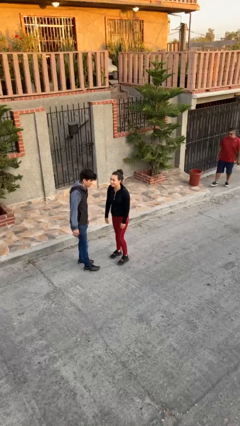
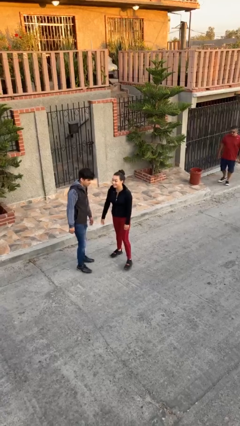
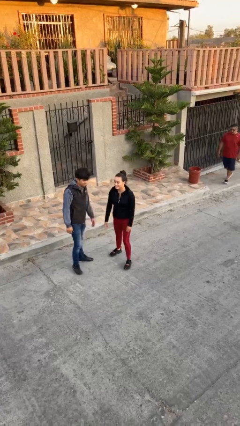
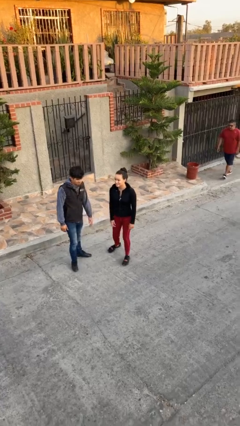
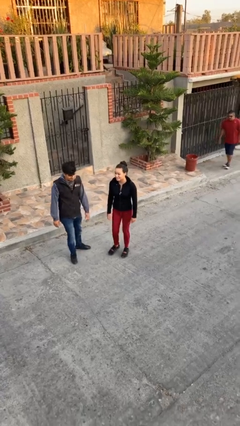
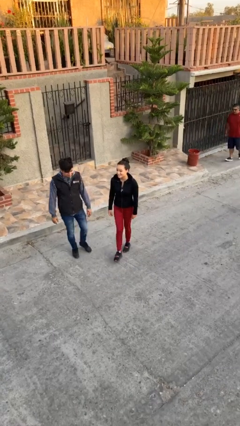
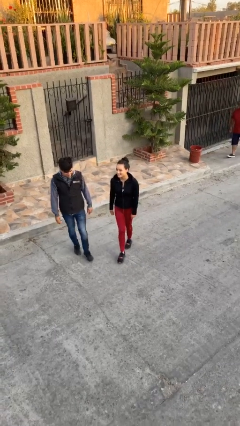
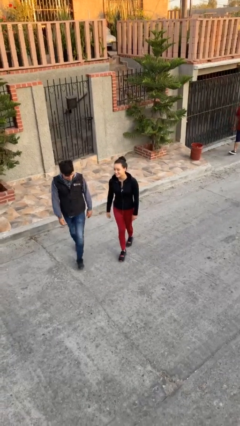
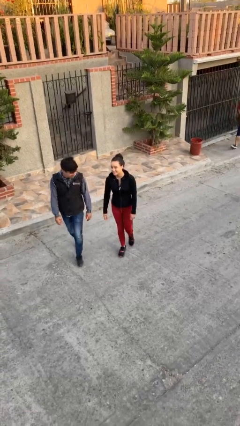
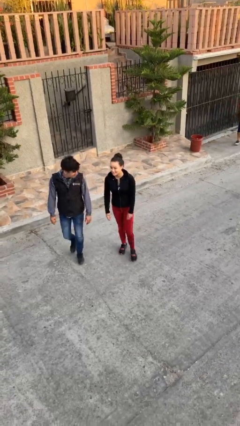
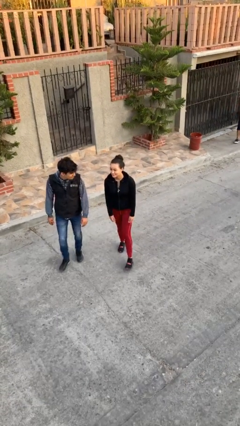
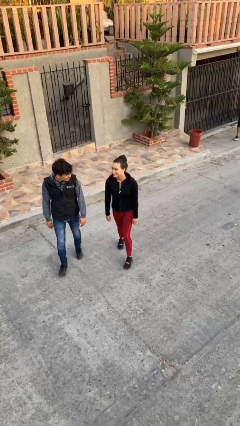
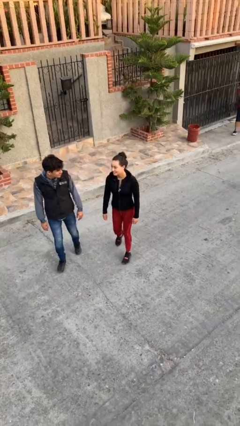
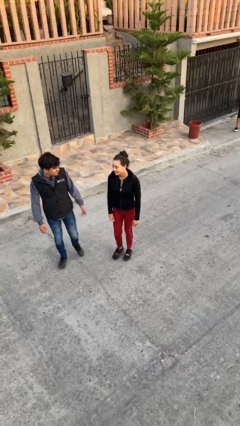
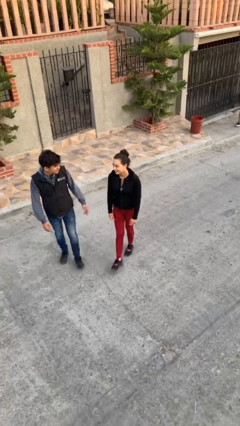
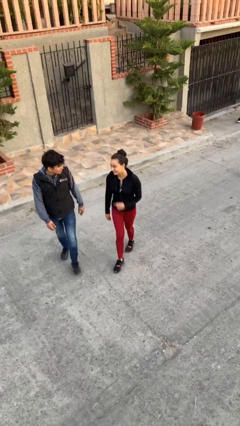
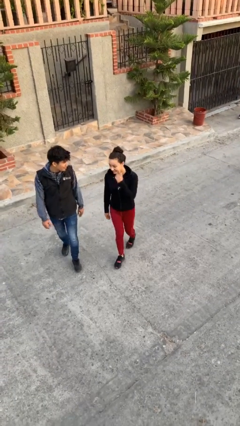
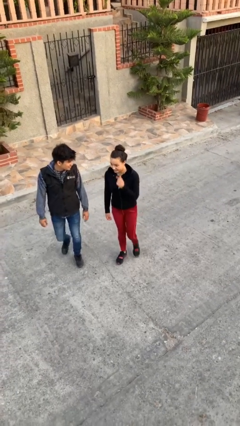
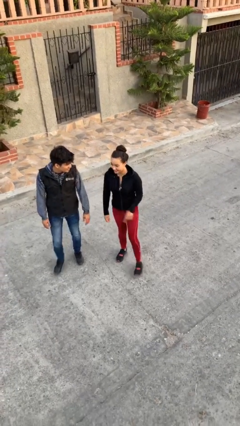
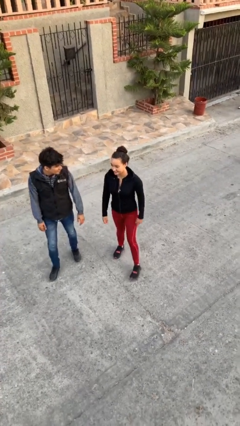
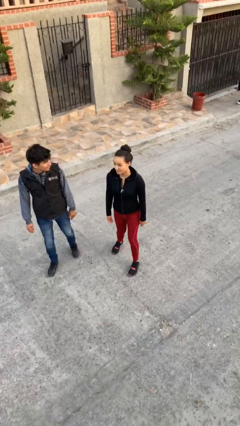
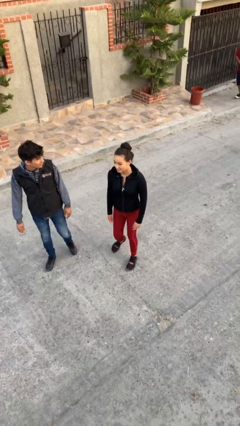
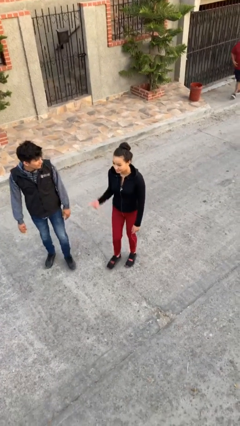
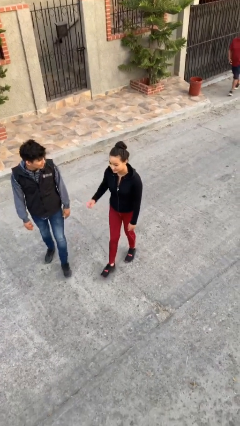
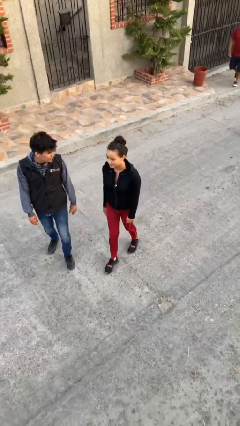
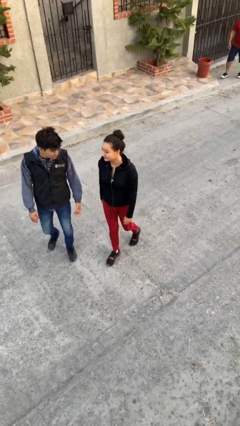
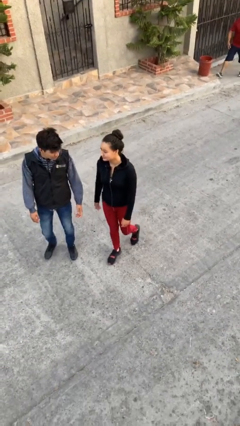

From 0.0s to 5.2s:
person talks to person

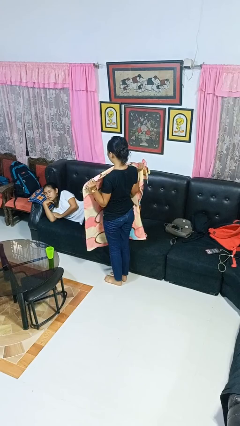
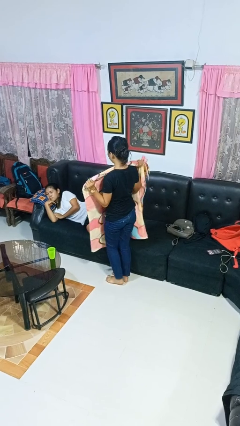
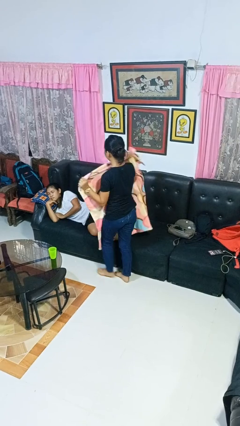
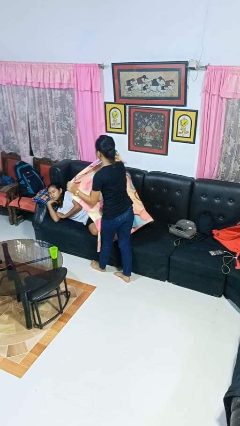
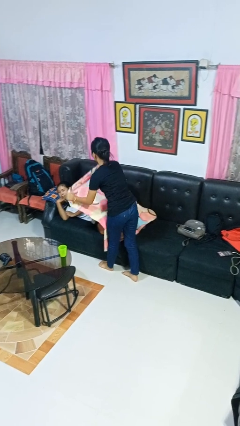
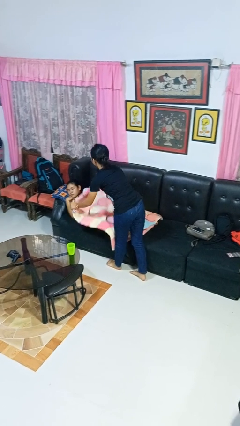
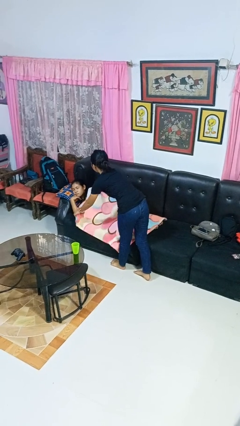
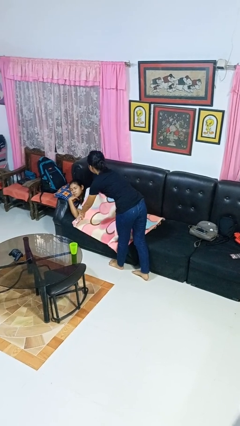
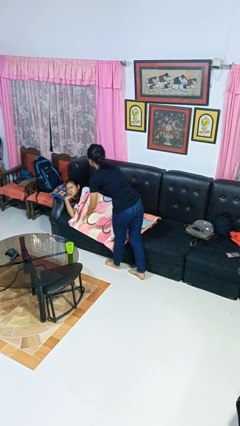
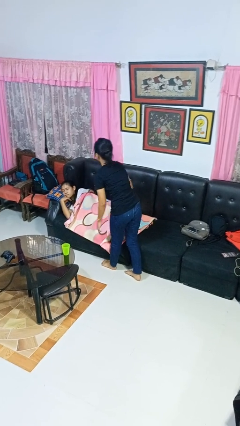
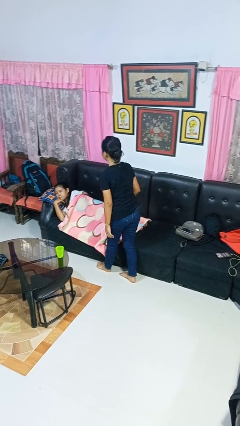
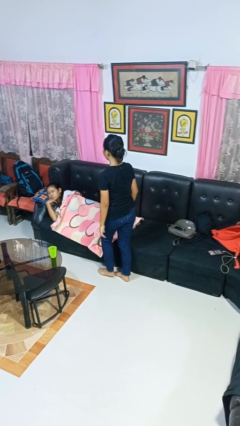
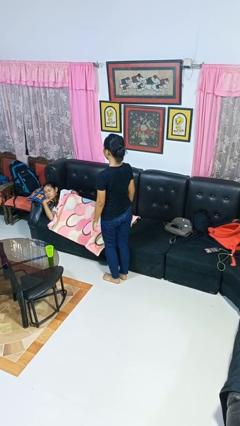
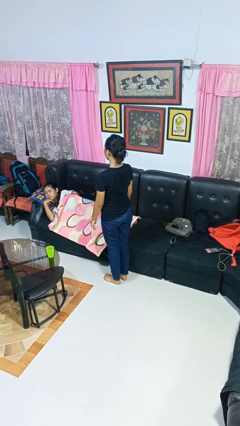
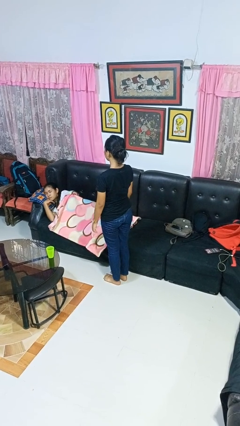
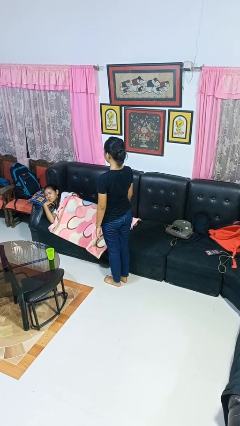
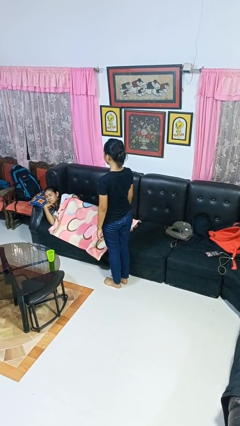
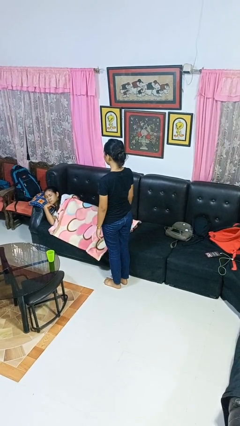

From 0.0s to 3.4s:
person covers friend with blanket

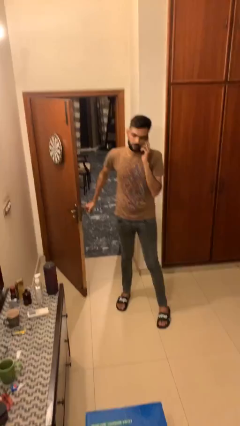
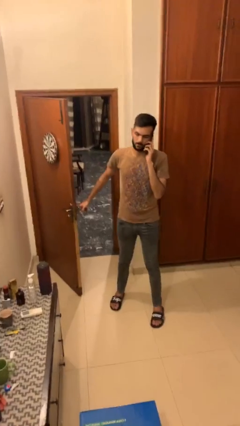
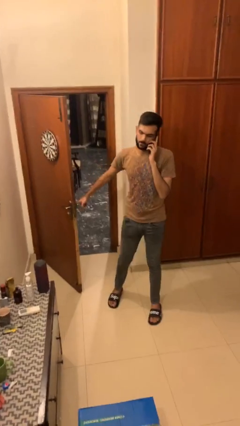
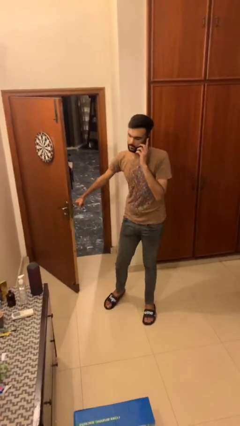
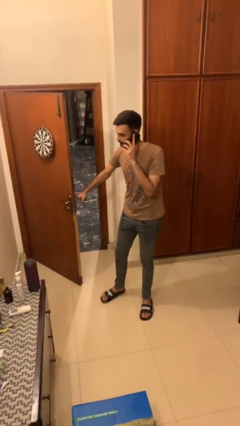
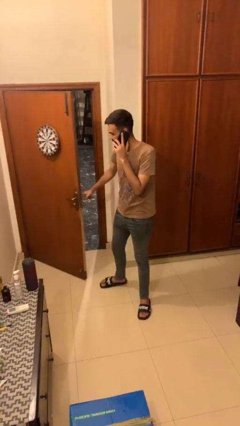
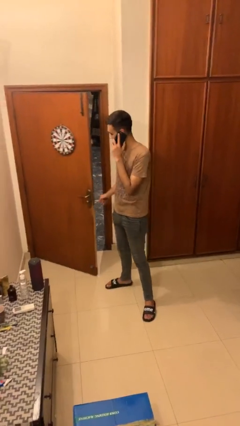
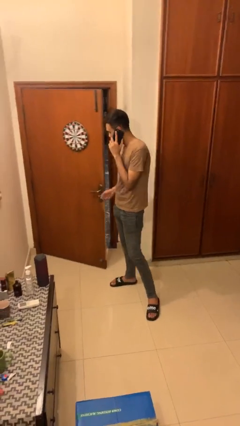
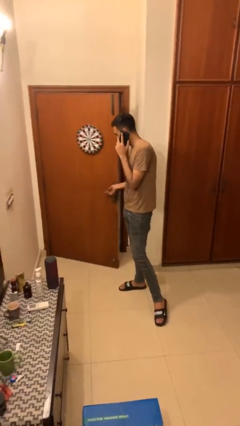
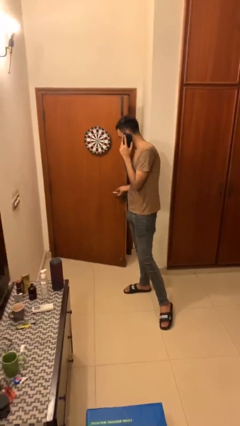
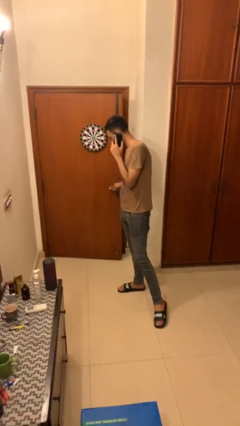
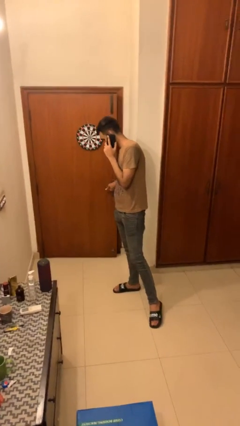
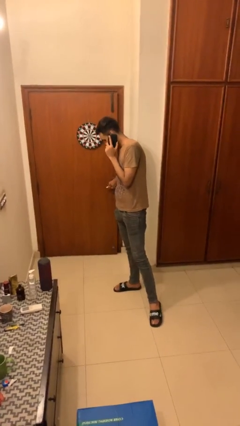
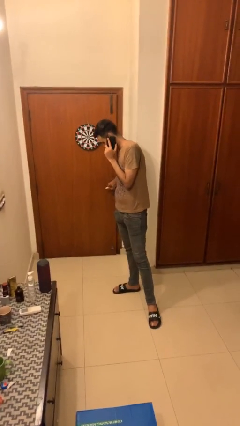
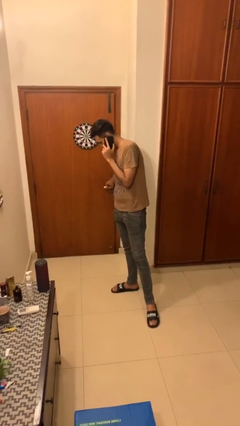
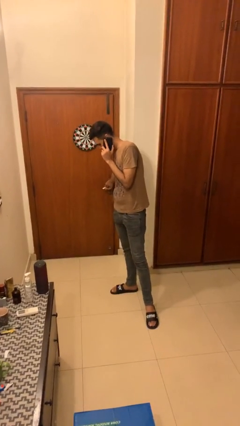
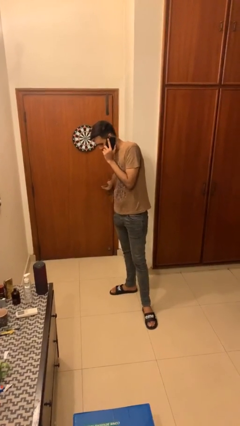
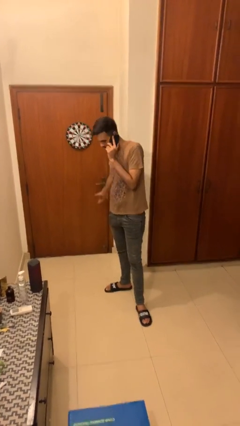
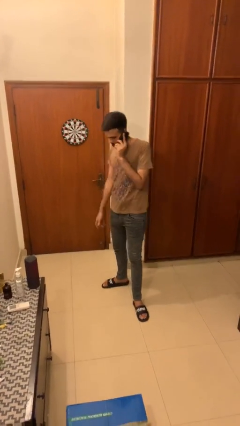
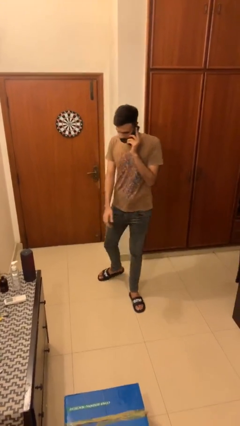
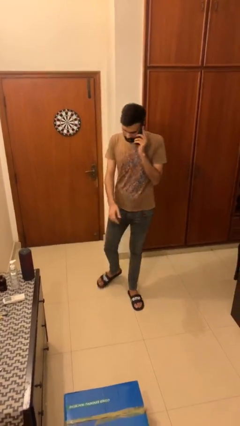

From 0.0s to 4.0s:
person closes facility door

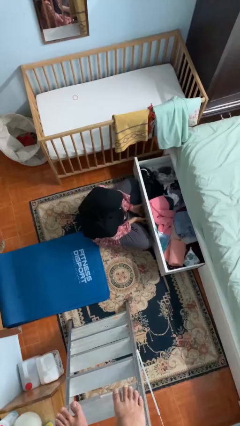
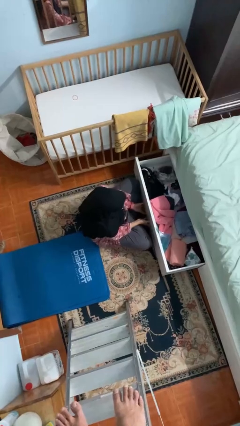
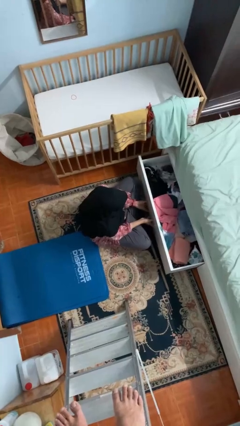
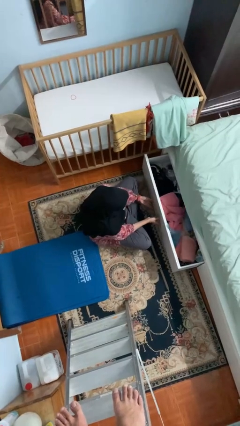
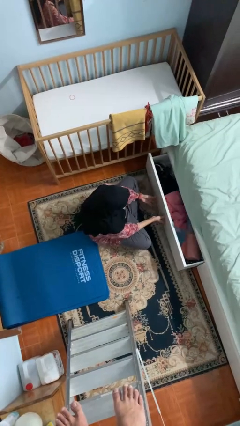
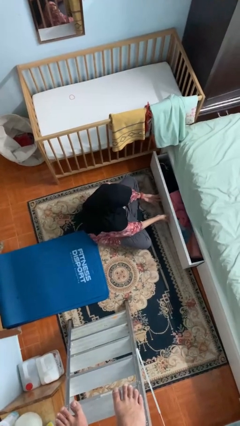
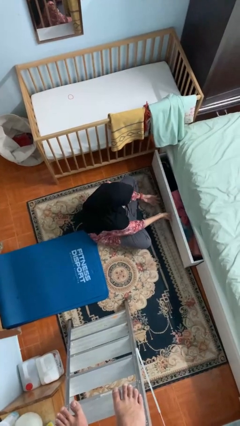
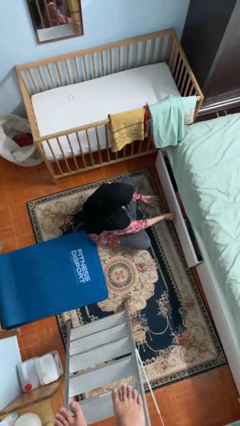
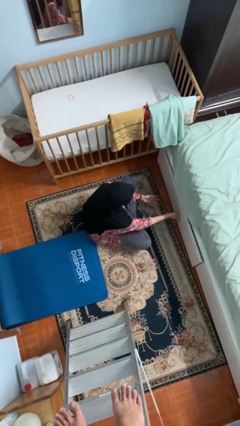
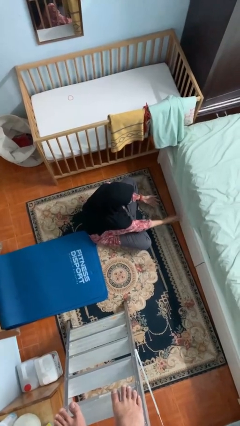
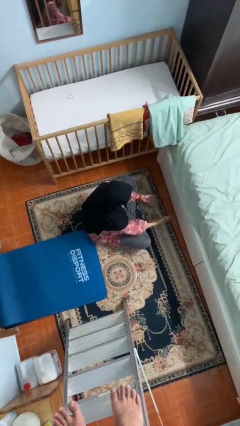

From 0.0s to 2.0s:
person closes dresser drawer

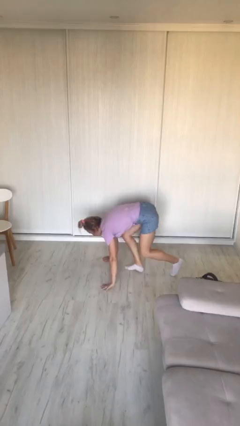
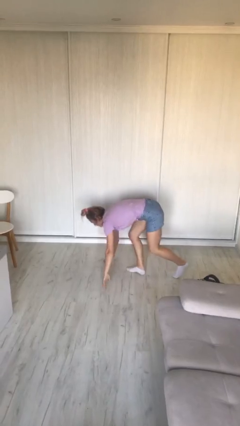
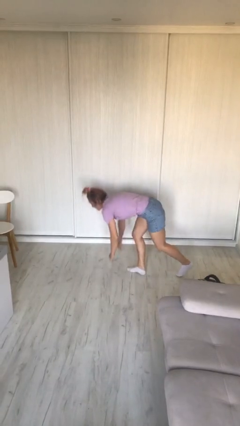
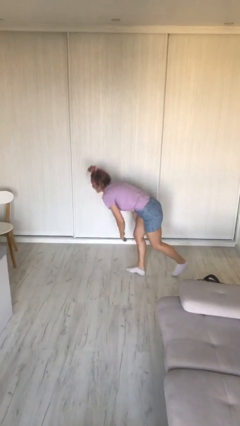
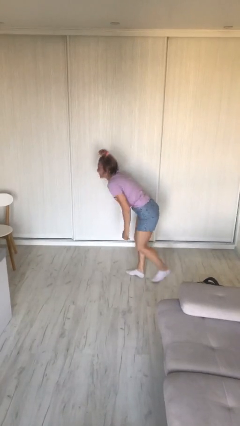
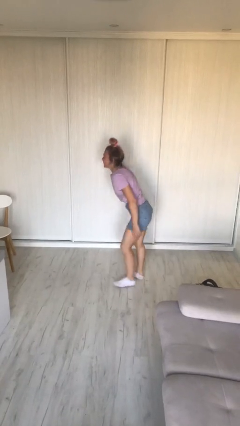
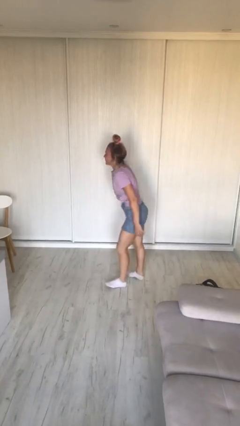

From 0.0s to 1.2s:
person stands up from floor

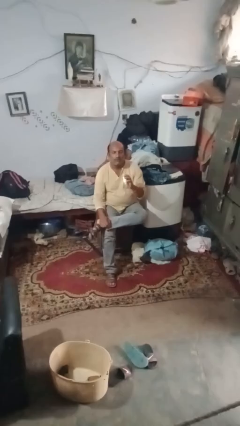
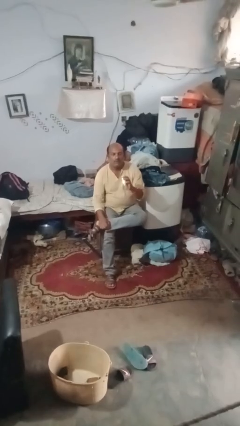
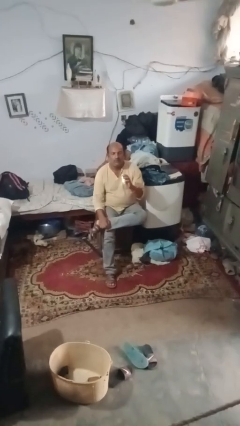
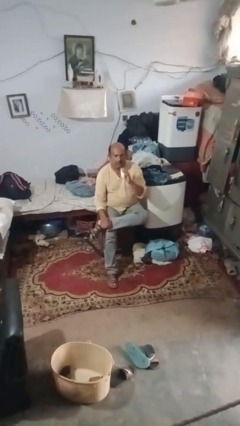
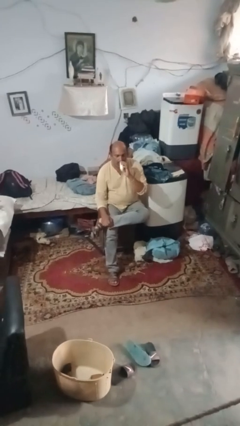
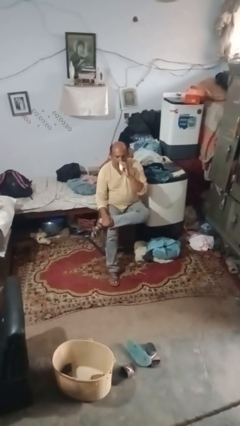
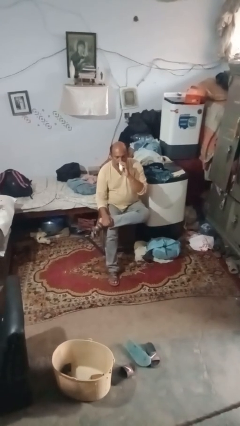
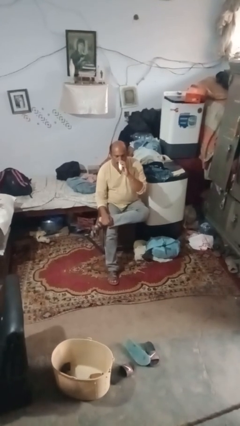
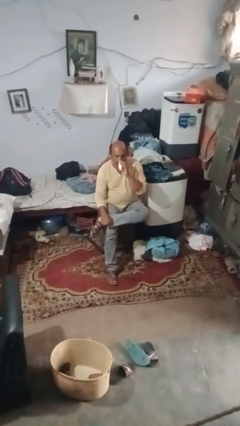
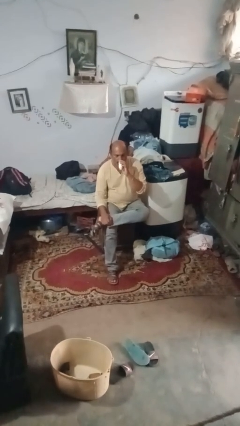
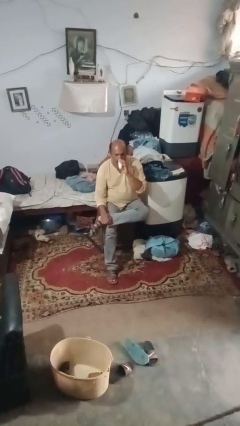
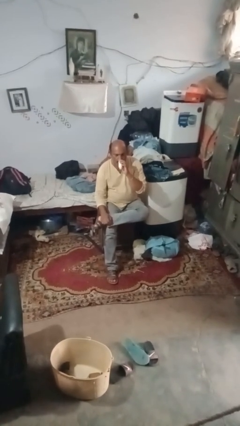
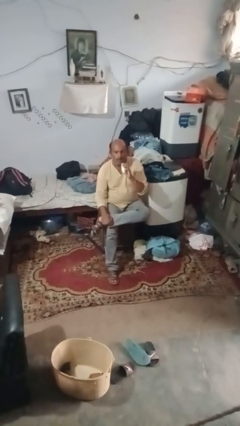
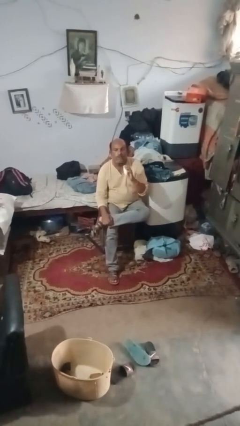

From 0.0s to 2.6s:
person vapes
